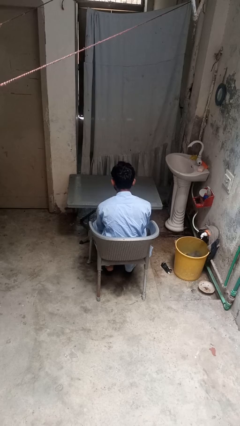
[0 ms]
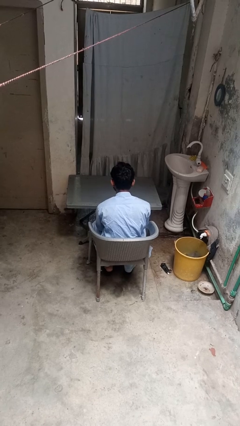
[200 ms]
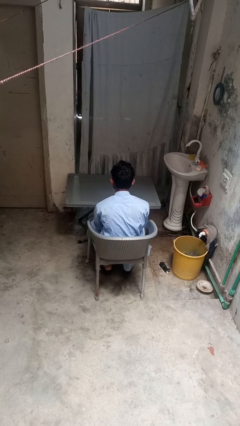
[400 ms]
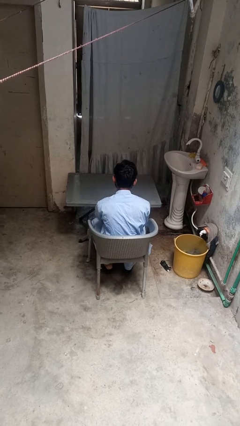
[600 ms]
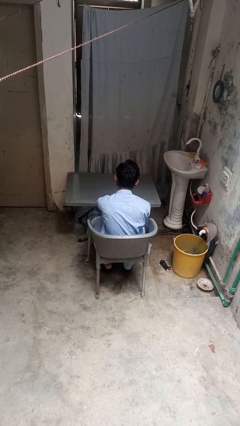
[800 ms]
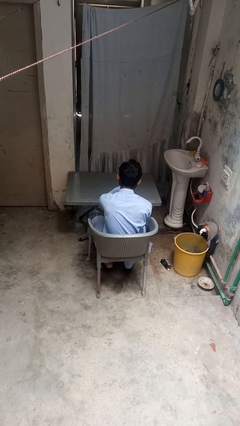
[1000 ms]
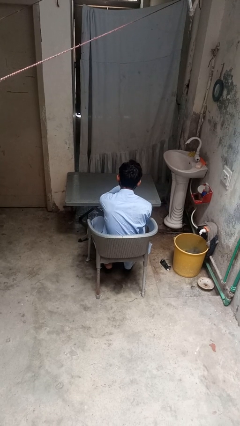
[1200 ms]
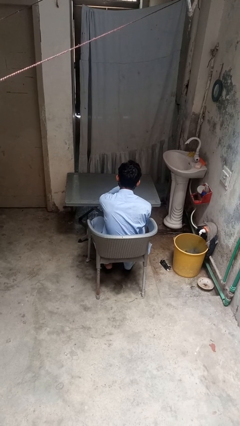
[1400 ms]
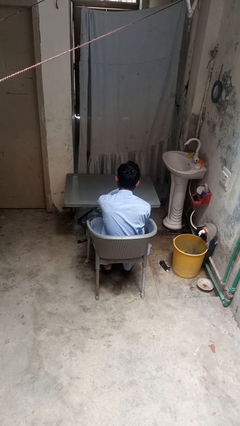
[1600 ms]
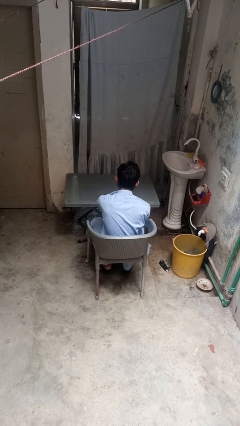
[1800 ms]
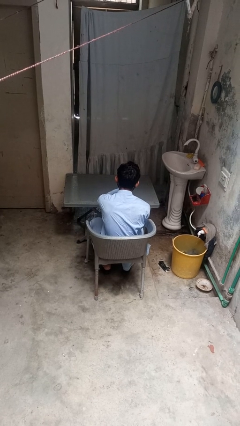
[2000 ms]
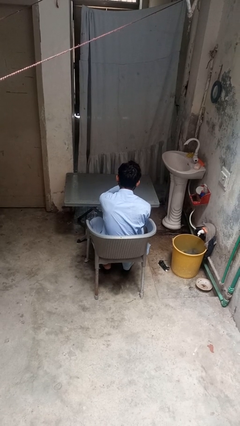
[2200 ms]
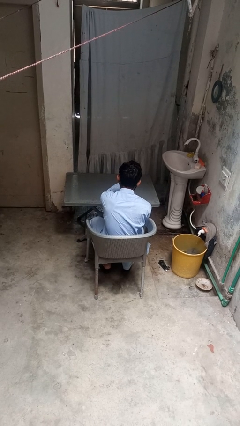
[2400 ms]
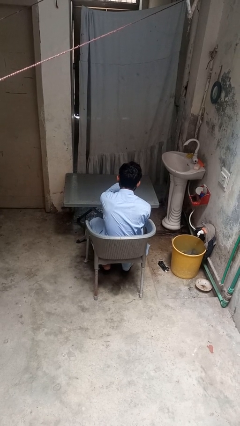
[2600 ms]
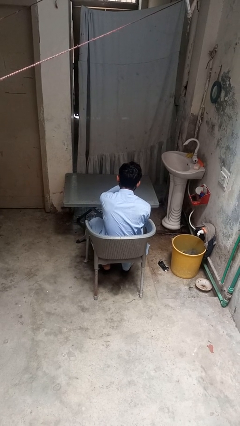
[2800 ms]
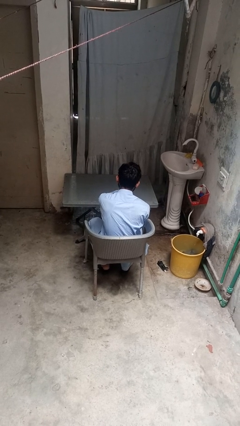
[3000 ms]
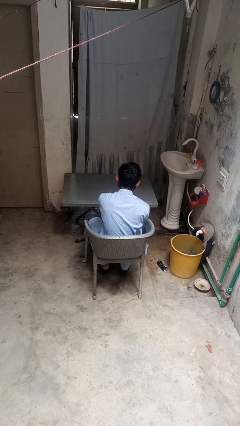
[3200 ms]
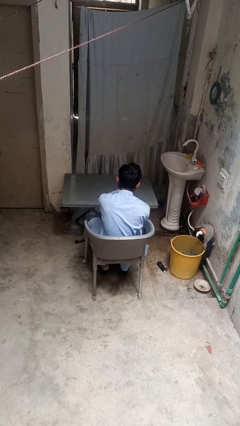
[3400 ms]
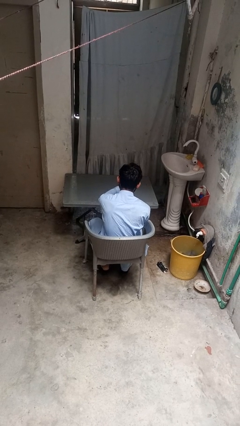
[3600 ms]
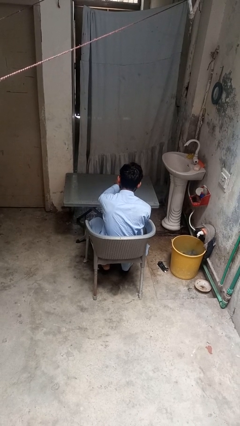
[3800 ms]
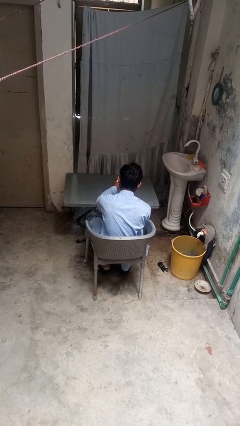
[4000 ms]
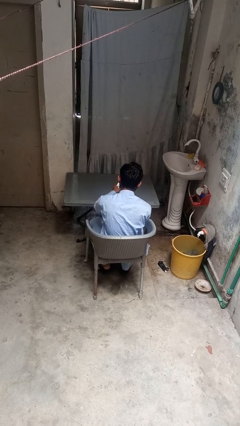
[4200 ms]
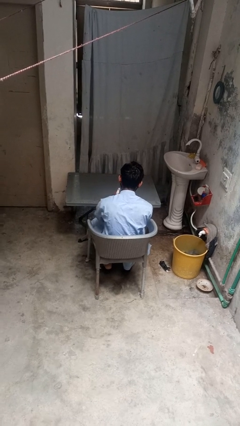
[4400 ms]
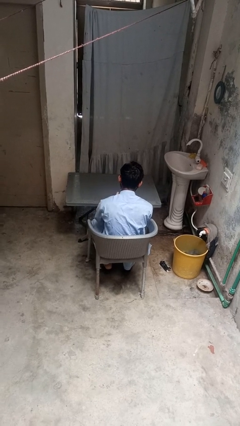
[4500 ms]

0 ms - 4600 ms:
person sprays from bottle

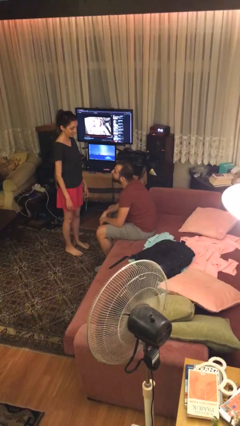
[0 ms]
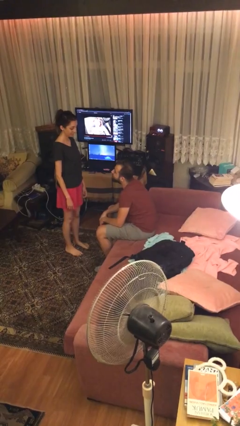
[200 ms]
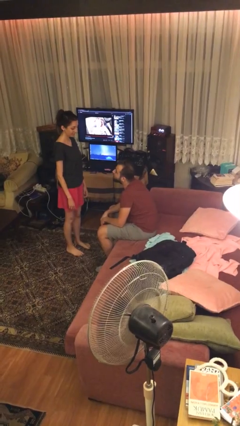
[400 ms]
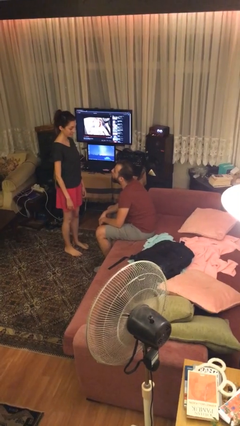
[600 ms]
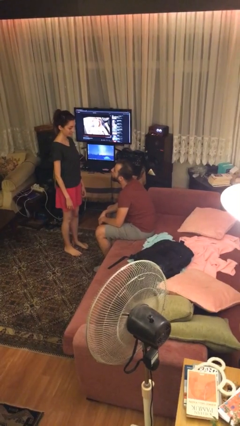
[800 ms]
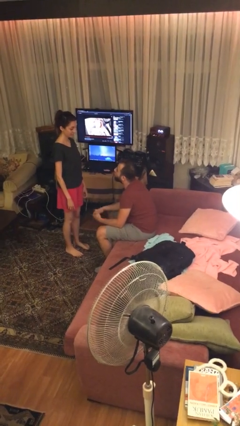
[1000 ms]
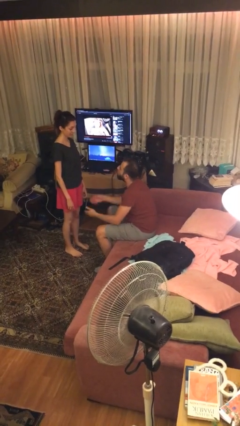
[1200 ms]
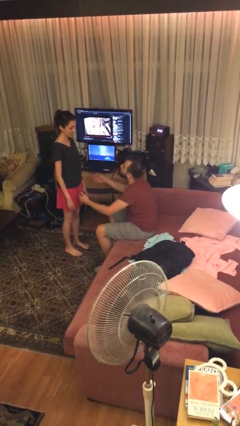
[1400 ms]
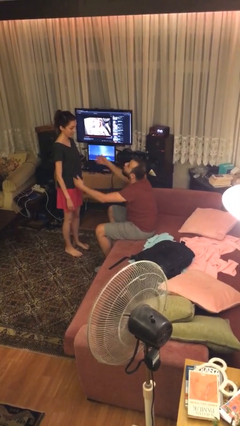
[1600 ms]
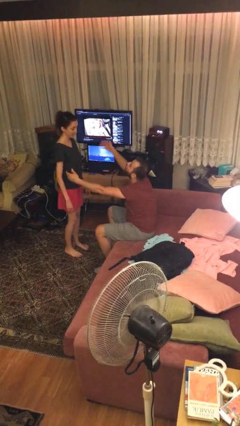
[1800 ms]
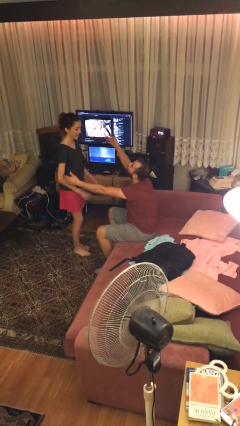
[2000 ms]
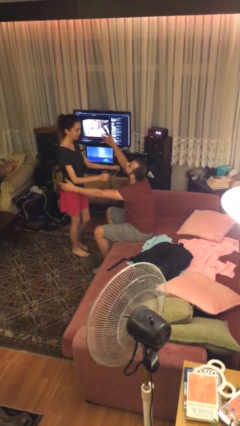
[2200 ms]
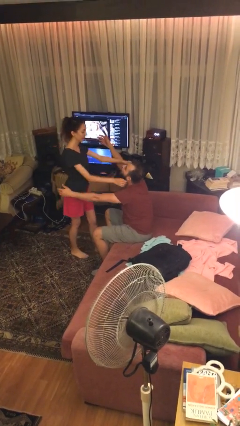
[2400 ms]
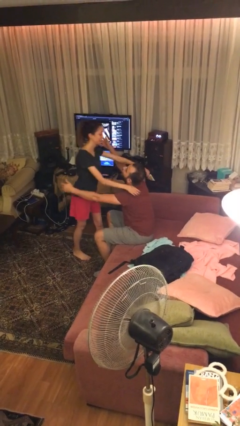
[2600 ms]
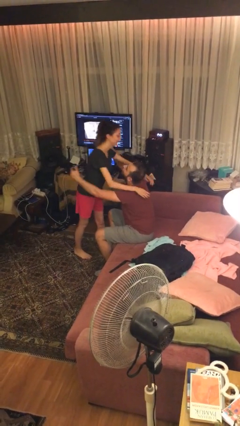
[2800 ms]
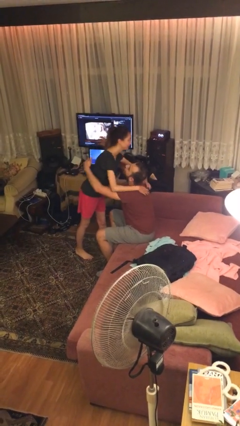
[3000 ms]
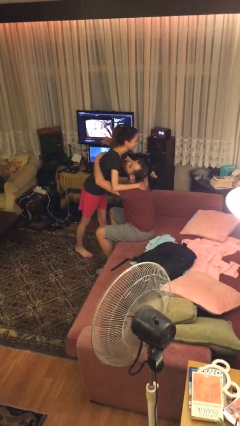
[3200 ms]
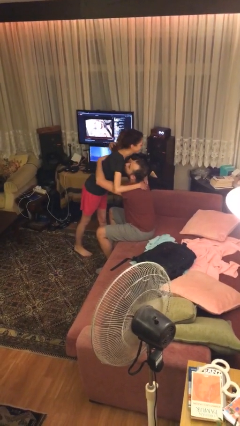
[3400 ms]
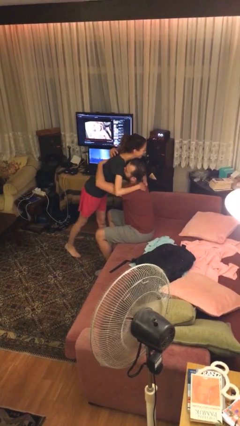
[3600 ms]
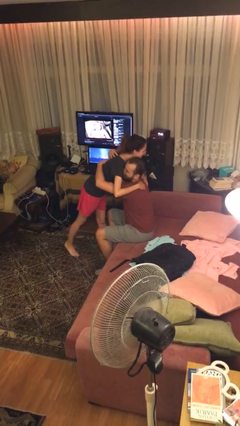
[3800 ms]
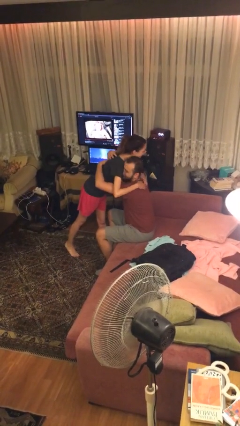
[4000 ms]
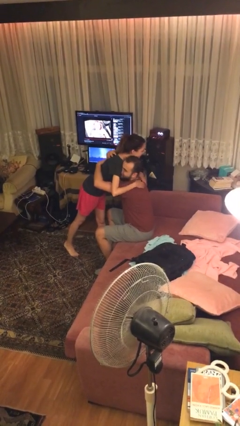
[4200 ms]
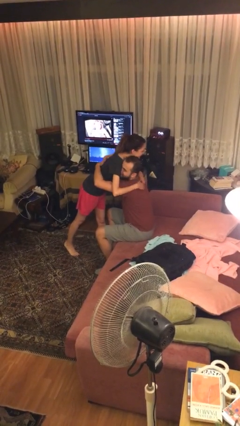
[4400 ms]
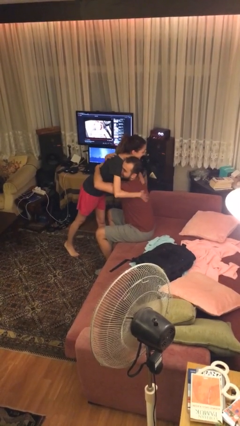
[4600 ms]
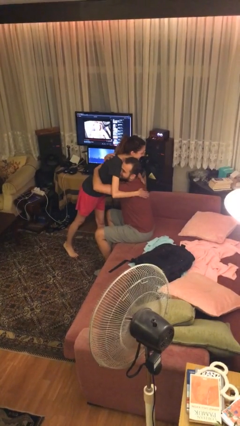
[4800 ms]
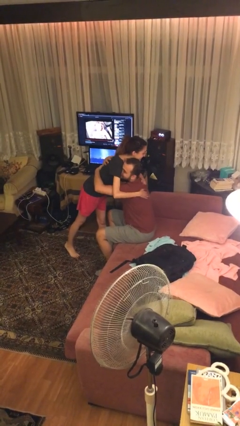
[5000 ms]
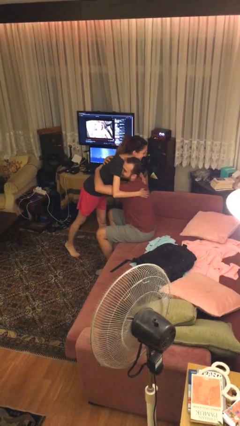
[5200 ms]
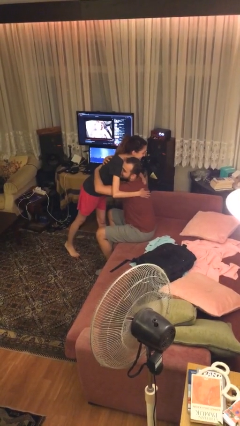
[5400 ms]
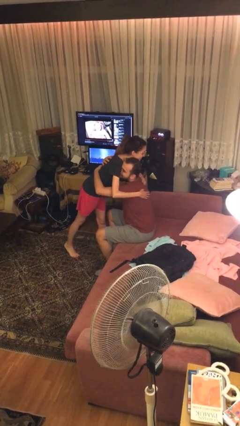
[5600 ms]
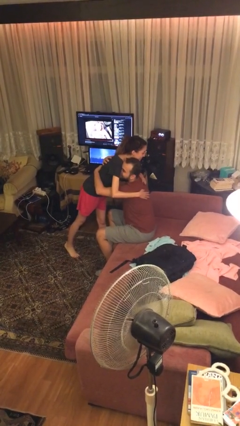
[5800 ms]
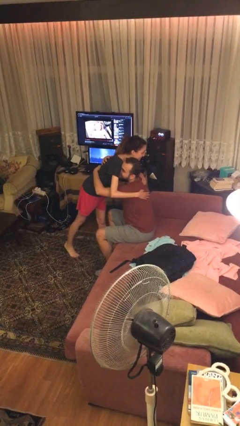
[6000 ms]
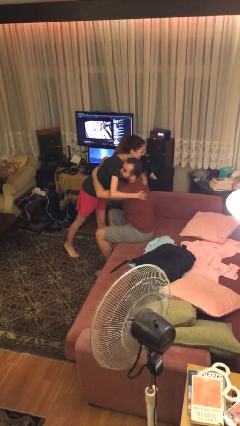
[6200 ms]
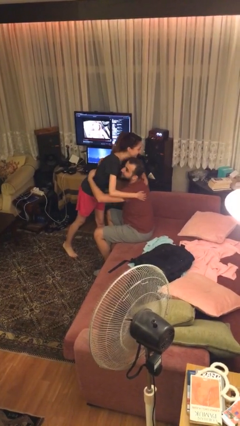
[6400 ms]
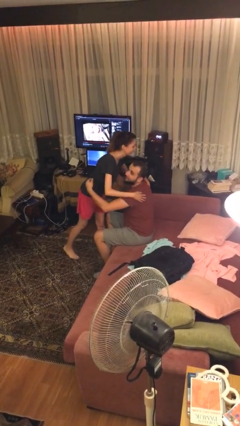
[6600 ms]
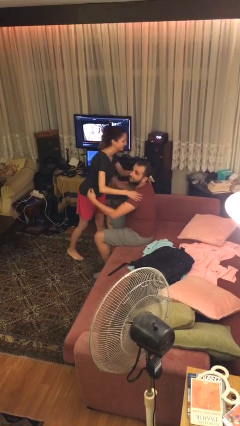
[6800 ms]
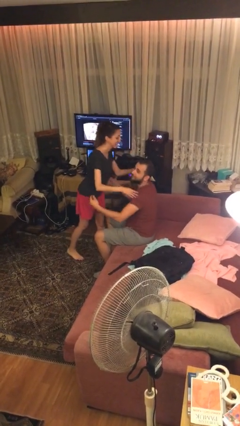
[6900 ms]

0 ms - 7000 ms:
person embraces person

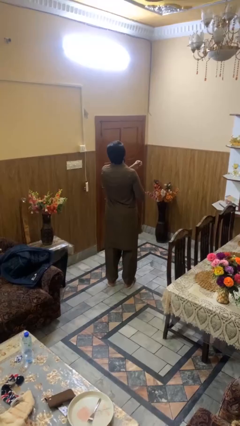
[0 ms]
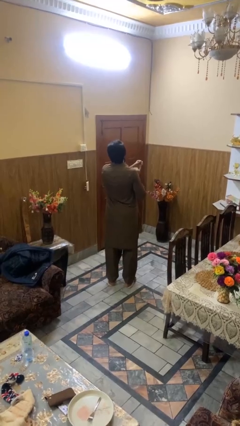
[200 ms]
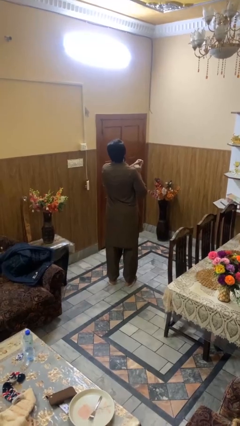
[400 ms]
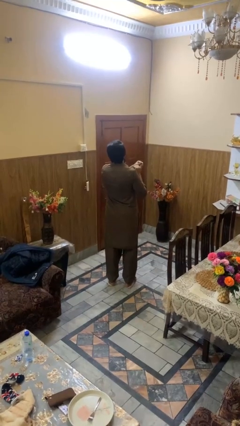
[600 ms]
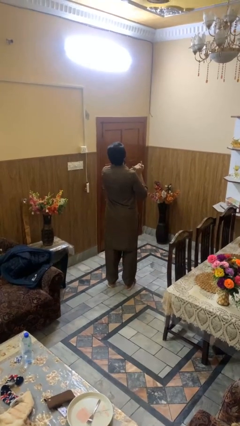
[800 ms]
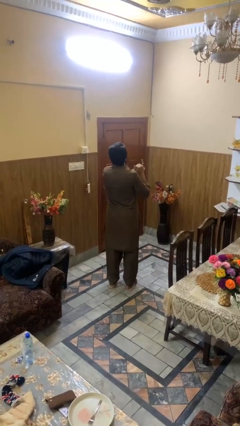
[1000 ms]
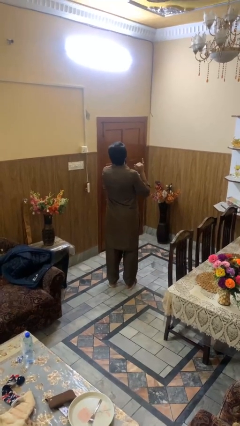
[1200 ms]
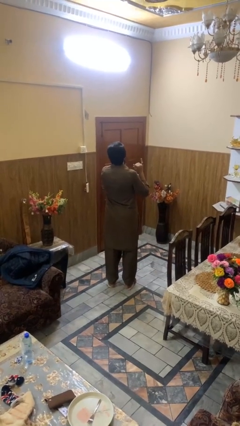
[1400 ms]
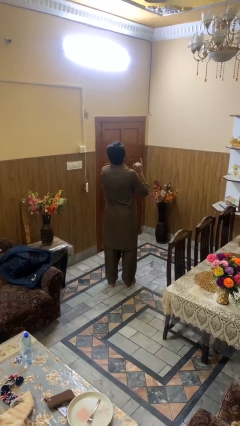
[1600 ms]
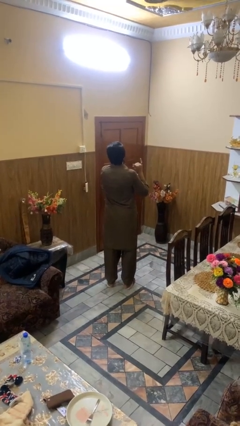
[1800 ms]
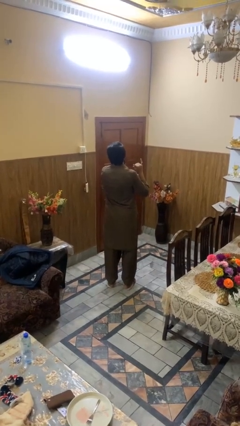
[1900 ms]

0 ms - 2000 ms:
person puts on ring

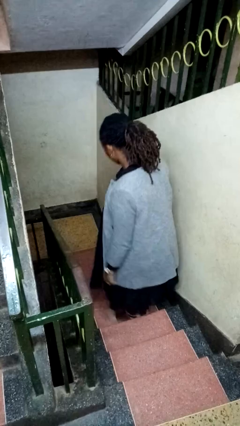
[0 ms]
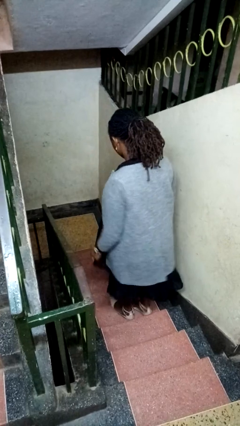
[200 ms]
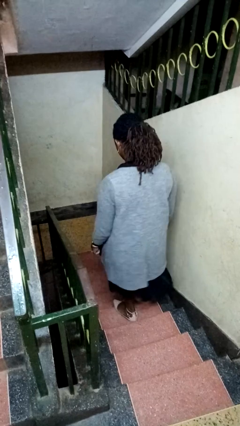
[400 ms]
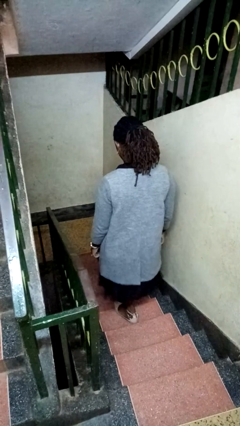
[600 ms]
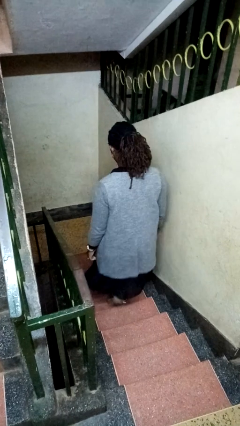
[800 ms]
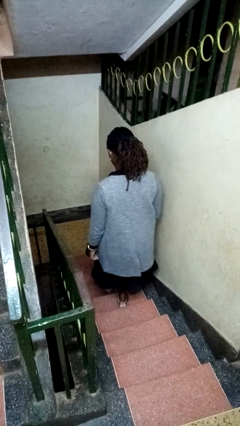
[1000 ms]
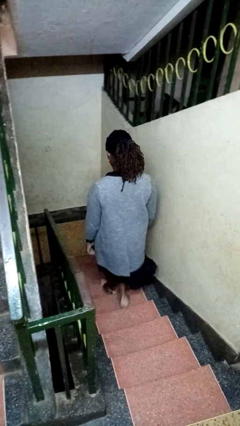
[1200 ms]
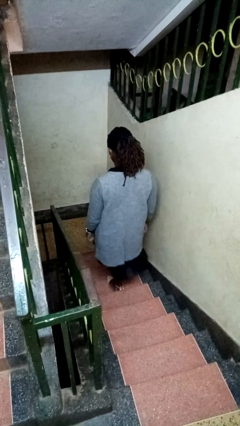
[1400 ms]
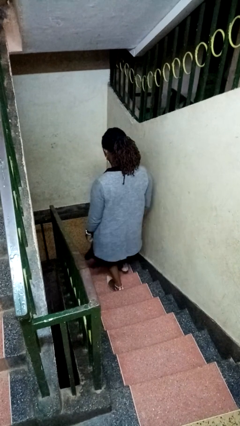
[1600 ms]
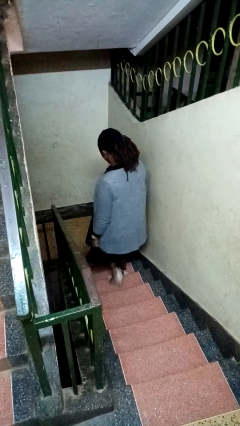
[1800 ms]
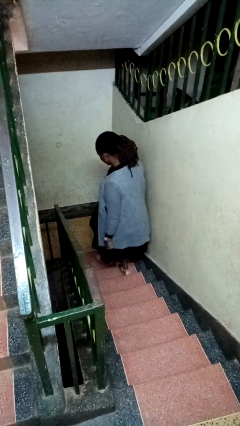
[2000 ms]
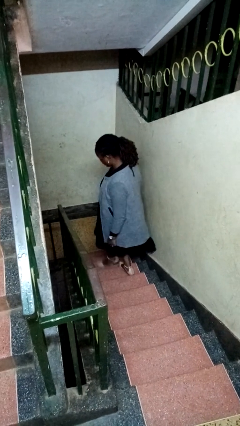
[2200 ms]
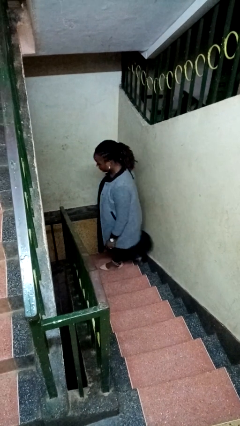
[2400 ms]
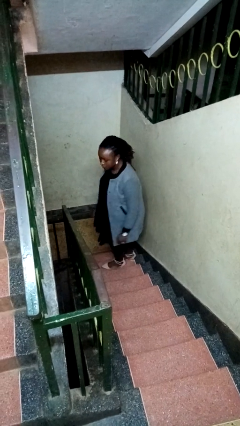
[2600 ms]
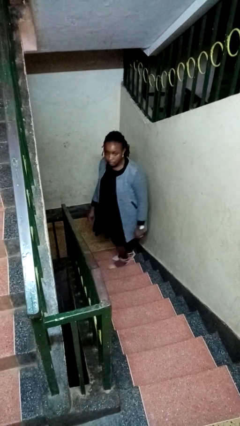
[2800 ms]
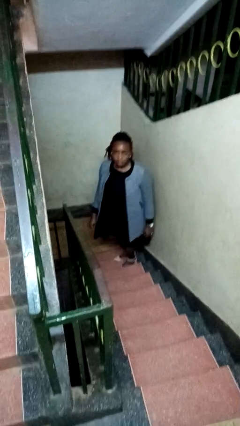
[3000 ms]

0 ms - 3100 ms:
person climbs down stairs

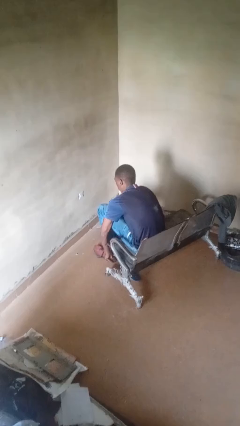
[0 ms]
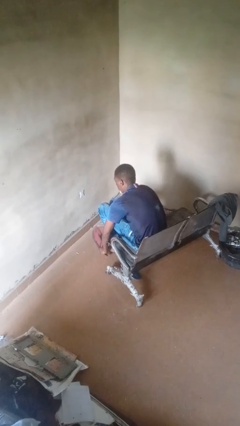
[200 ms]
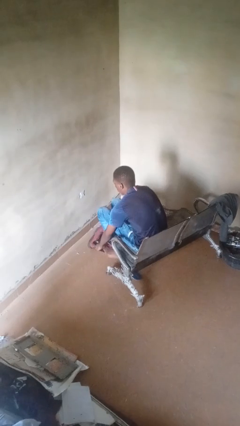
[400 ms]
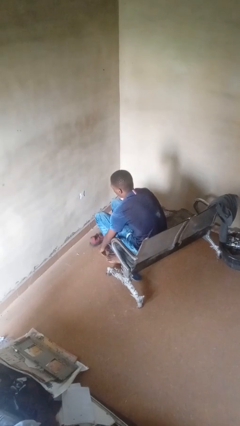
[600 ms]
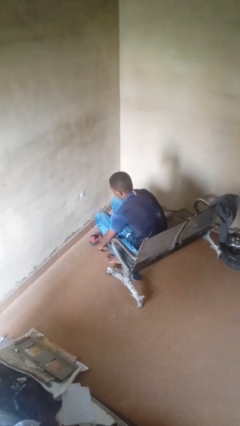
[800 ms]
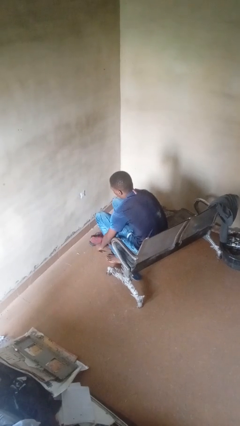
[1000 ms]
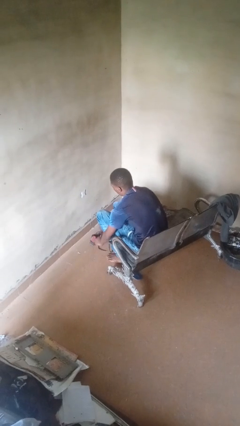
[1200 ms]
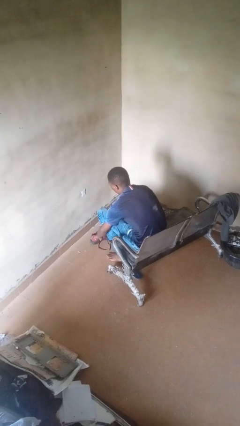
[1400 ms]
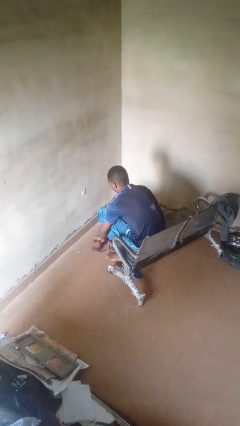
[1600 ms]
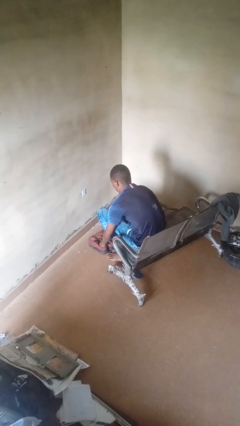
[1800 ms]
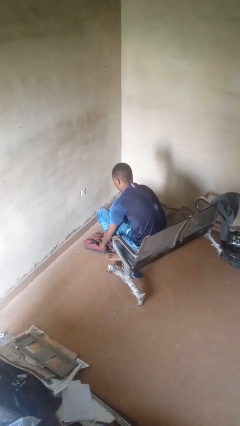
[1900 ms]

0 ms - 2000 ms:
person takes off shoes
